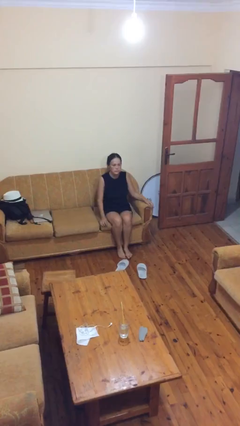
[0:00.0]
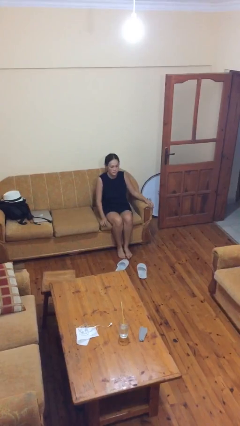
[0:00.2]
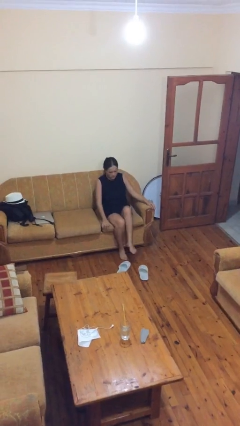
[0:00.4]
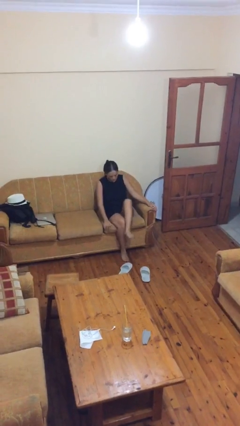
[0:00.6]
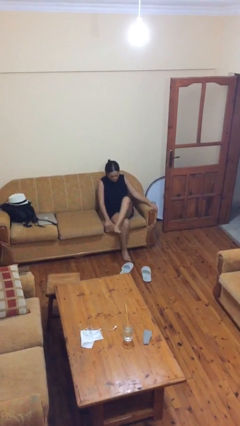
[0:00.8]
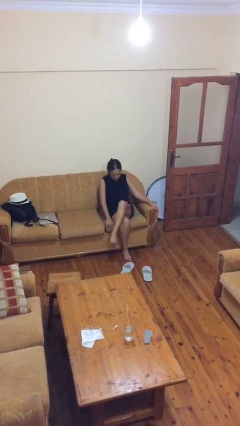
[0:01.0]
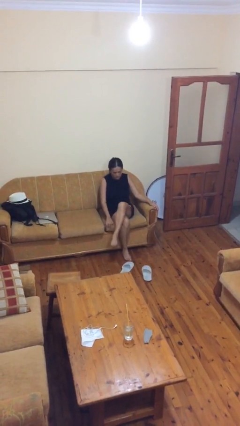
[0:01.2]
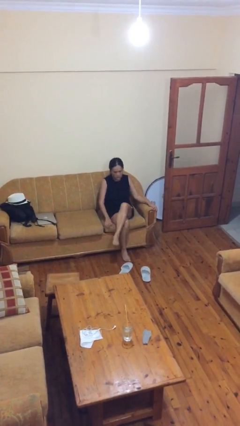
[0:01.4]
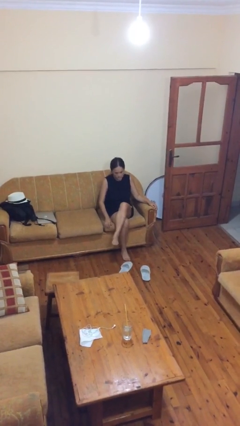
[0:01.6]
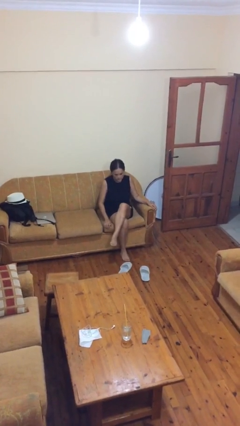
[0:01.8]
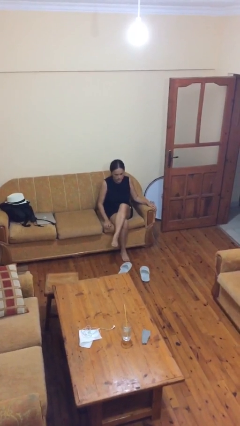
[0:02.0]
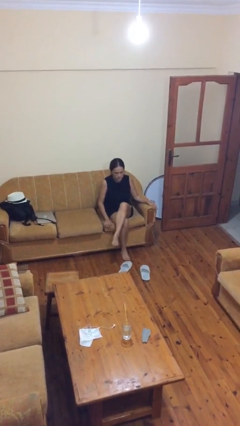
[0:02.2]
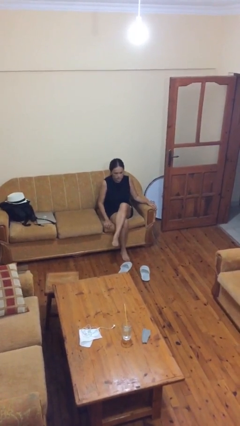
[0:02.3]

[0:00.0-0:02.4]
person crosses legs

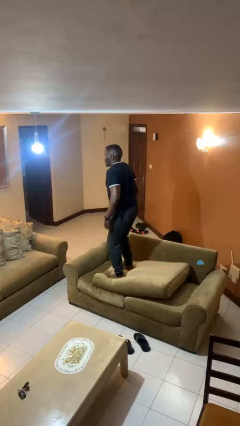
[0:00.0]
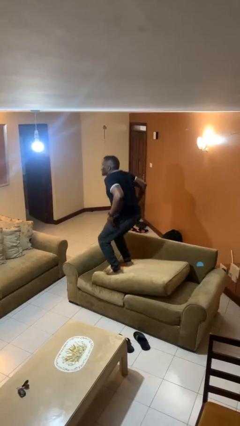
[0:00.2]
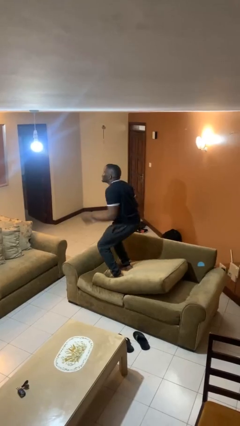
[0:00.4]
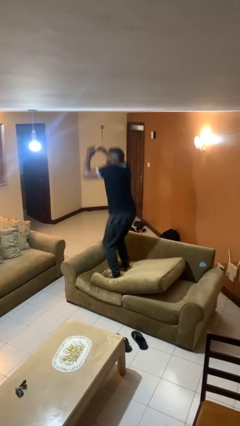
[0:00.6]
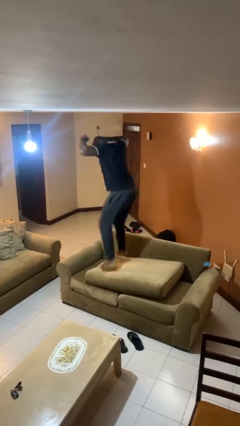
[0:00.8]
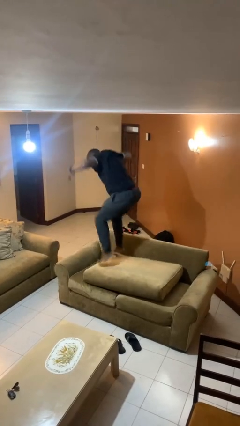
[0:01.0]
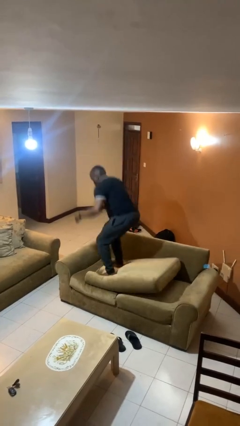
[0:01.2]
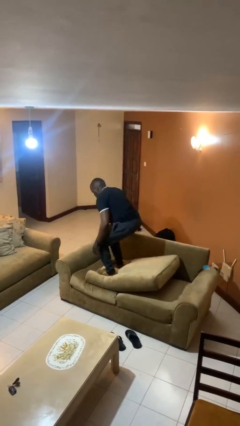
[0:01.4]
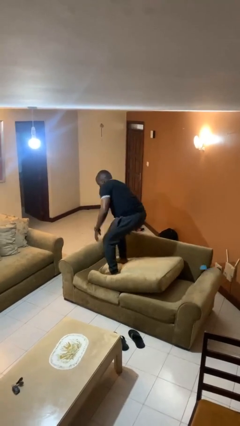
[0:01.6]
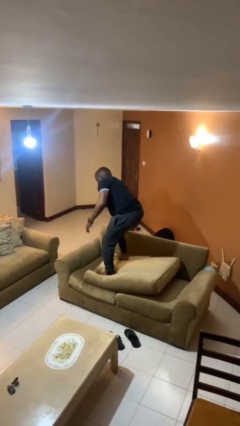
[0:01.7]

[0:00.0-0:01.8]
person jumps on couch

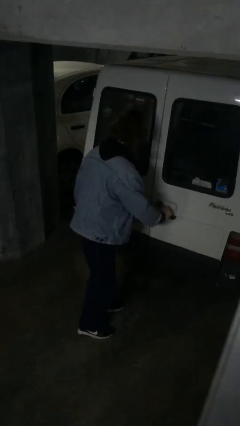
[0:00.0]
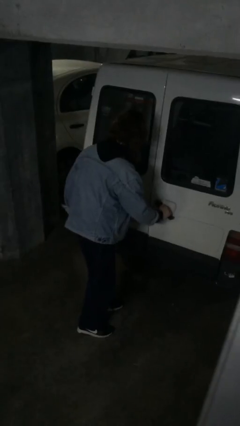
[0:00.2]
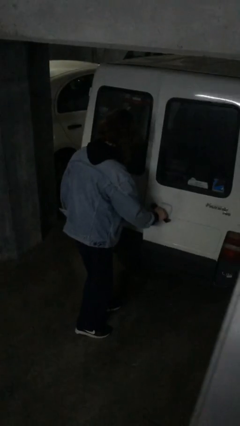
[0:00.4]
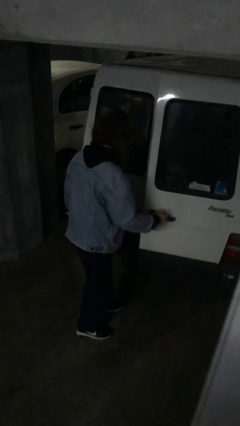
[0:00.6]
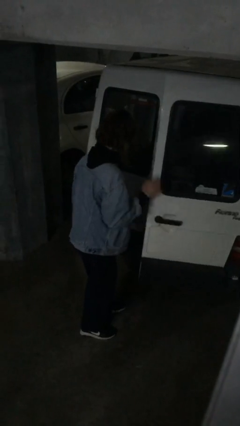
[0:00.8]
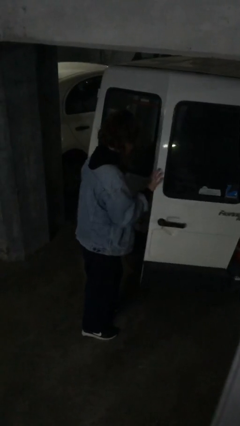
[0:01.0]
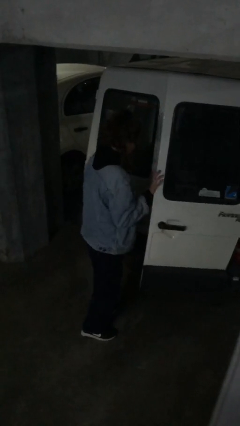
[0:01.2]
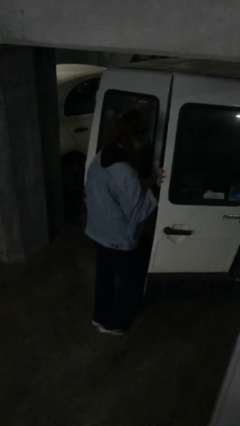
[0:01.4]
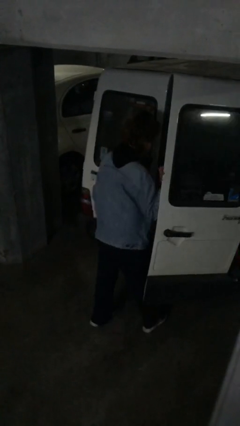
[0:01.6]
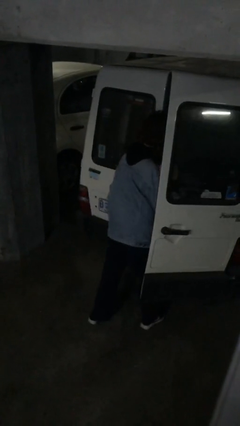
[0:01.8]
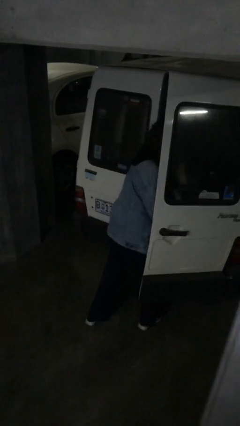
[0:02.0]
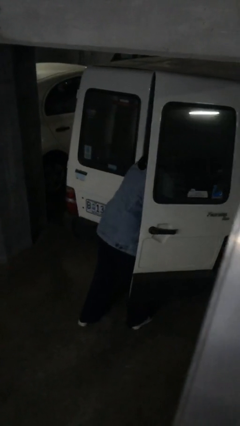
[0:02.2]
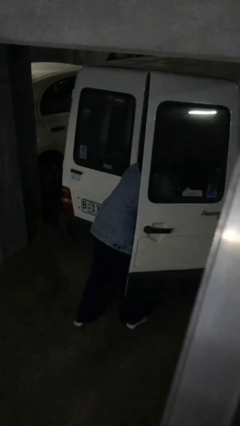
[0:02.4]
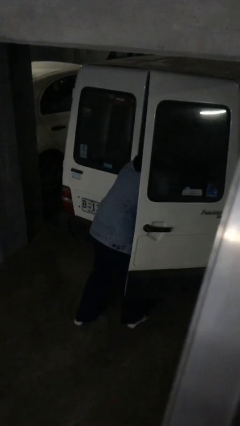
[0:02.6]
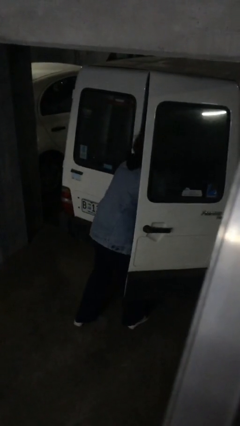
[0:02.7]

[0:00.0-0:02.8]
person opens car door

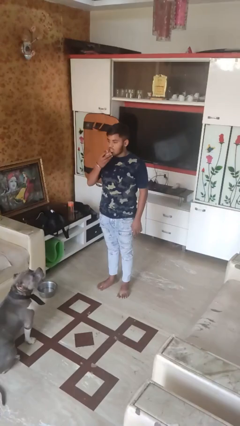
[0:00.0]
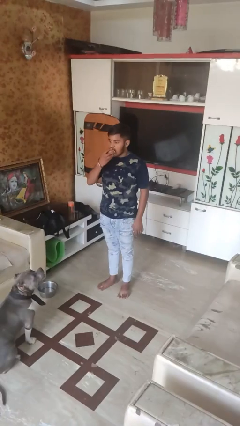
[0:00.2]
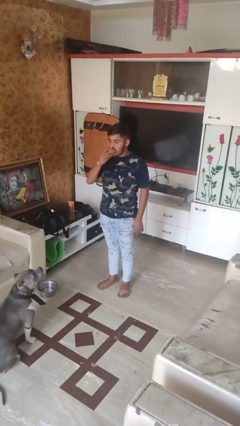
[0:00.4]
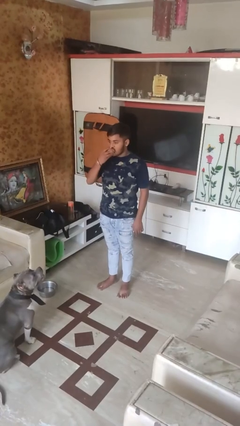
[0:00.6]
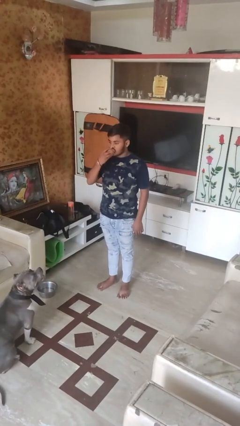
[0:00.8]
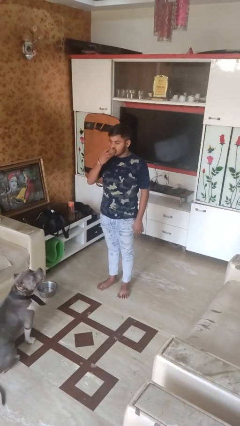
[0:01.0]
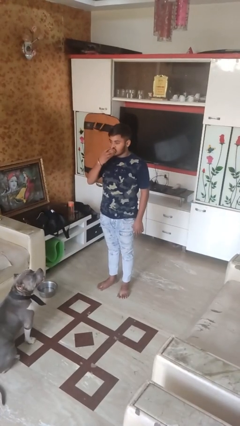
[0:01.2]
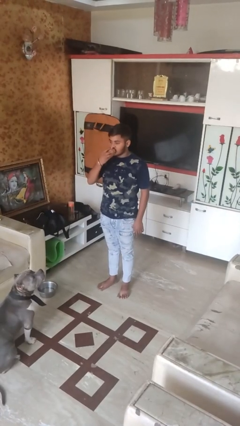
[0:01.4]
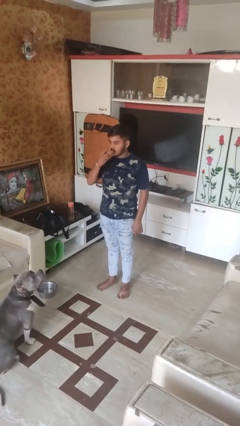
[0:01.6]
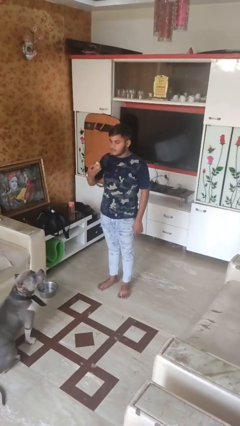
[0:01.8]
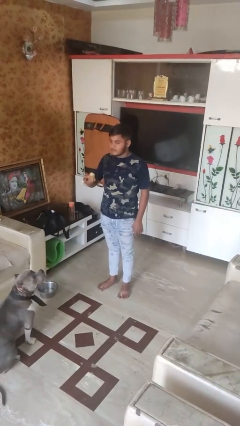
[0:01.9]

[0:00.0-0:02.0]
person eats apple

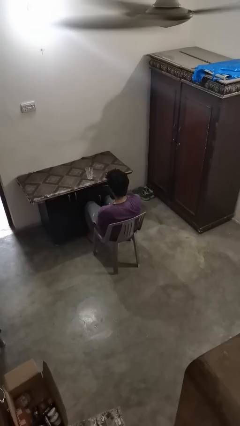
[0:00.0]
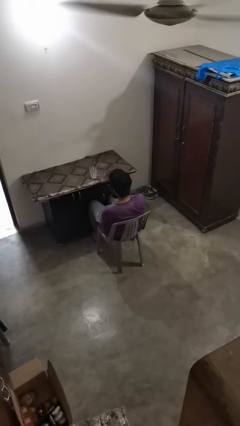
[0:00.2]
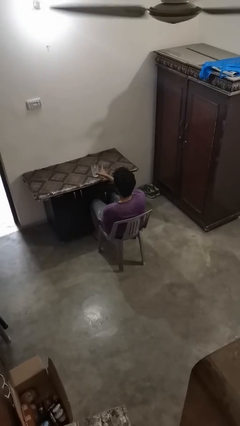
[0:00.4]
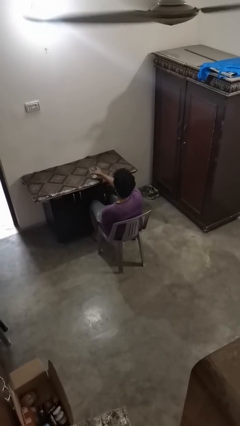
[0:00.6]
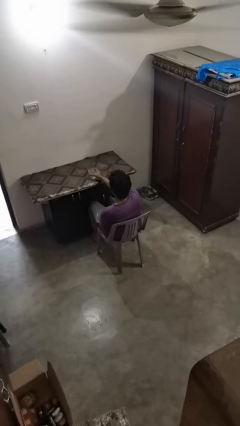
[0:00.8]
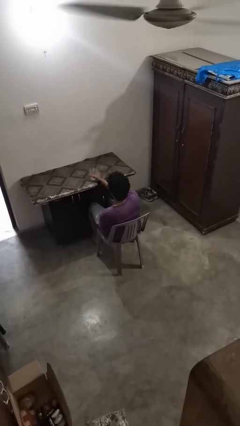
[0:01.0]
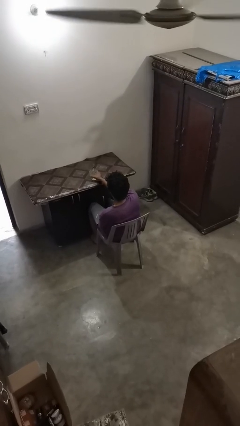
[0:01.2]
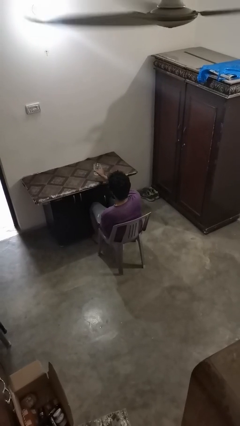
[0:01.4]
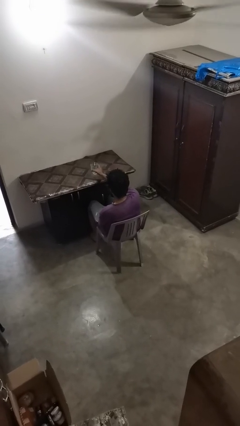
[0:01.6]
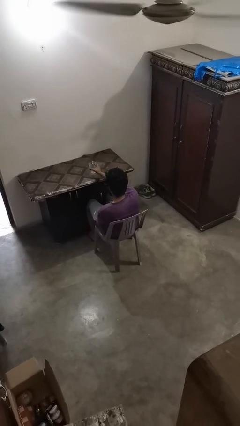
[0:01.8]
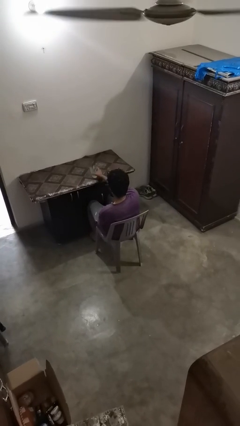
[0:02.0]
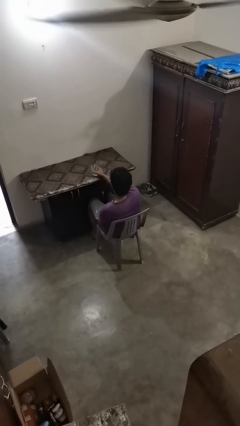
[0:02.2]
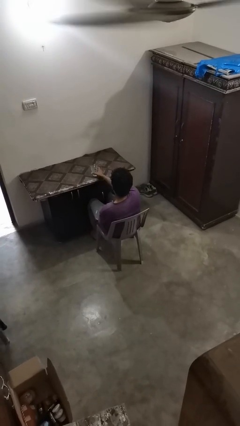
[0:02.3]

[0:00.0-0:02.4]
person knocks over glass

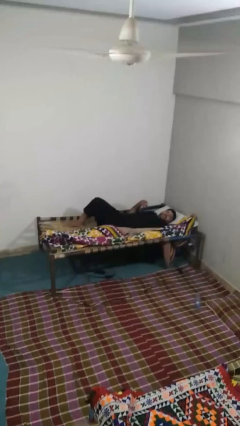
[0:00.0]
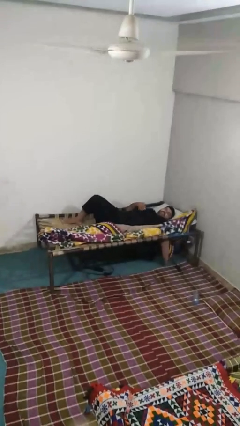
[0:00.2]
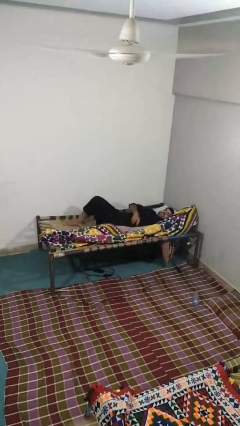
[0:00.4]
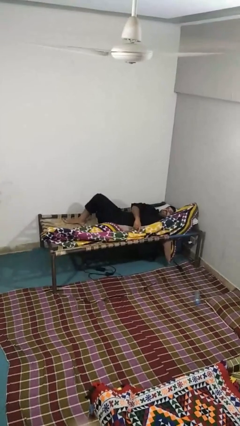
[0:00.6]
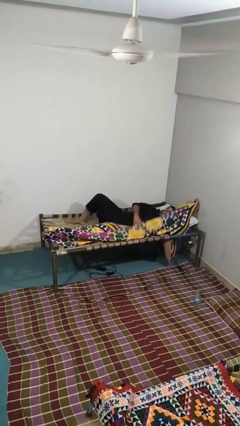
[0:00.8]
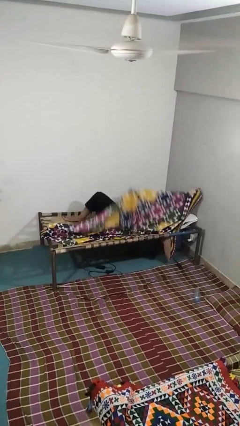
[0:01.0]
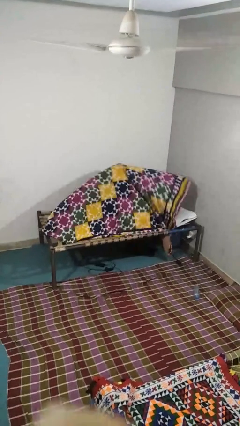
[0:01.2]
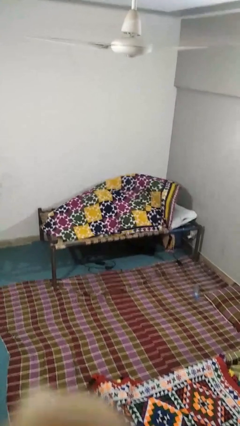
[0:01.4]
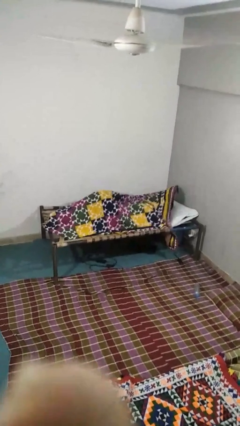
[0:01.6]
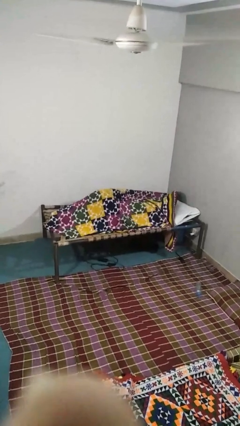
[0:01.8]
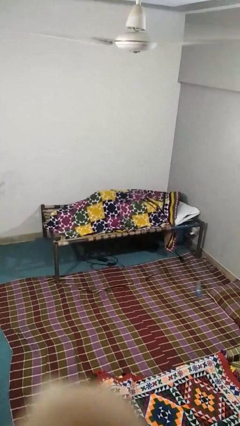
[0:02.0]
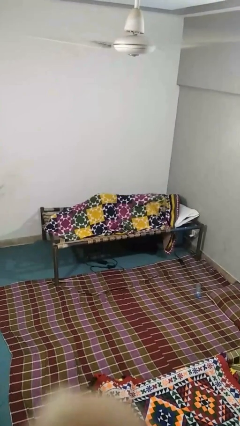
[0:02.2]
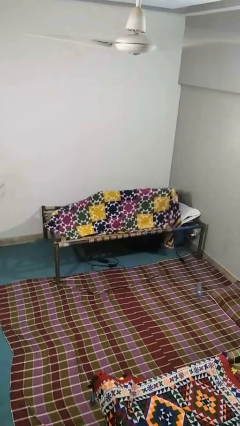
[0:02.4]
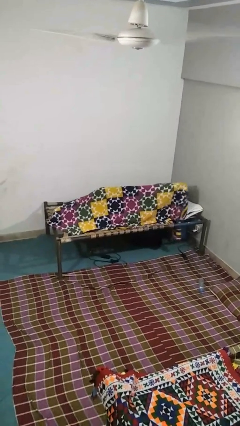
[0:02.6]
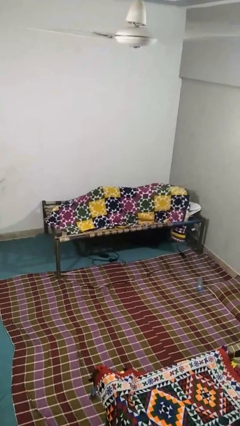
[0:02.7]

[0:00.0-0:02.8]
person covers with blanket

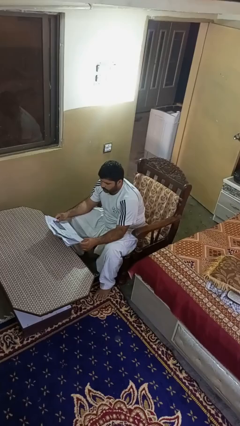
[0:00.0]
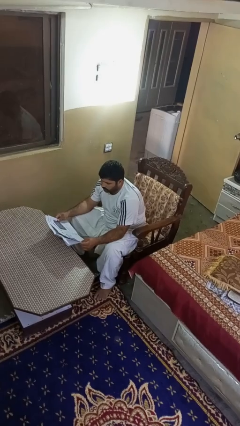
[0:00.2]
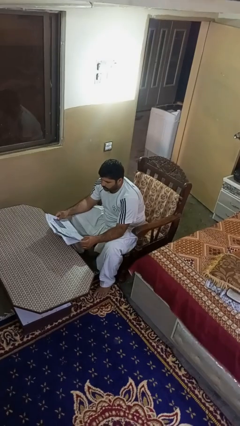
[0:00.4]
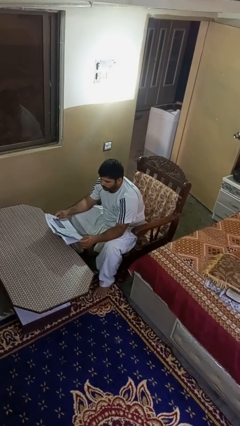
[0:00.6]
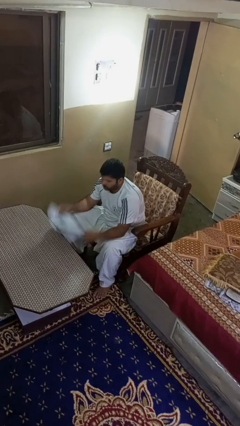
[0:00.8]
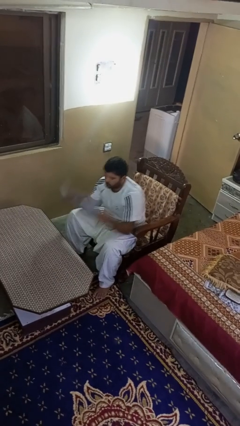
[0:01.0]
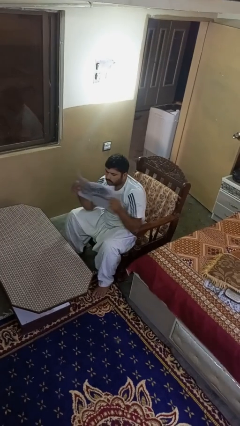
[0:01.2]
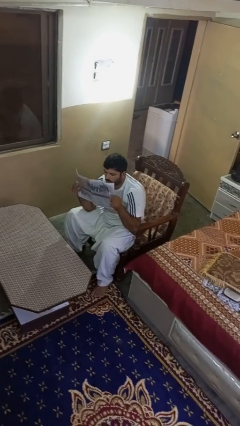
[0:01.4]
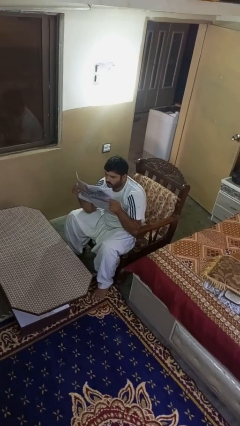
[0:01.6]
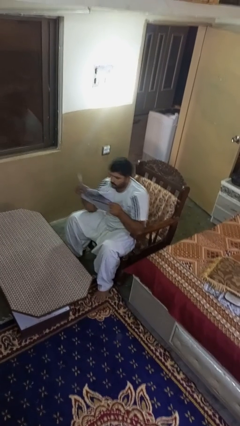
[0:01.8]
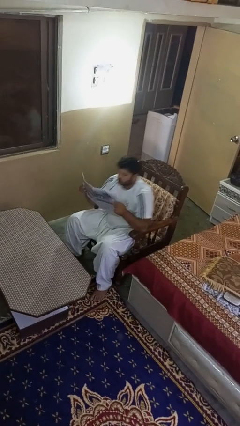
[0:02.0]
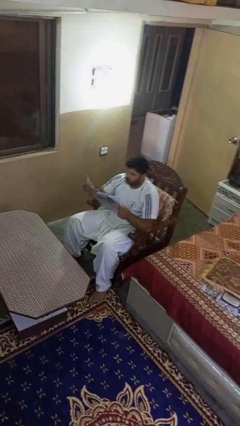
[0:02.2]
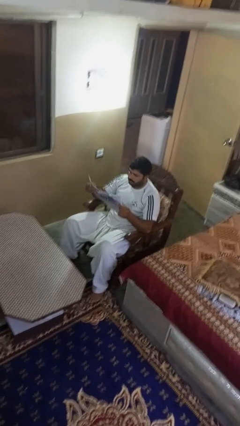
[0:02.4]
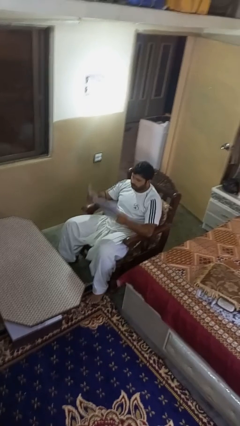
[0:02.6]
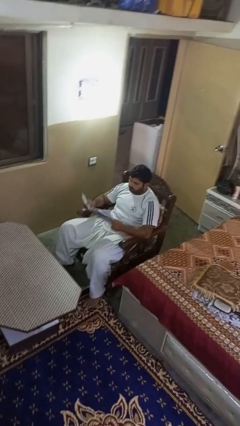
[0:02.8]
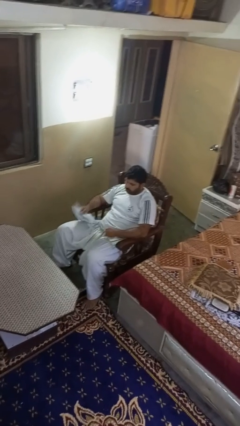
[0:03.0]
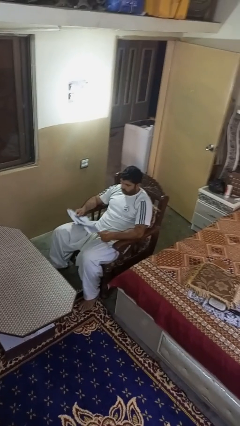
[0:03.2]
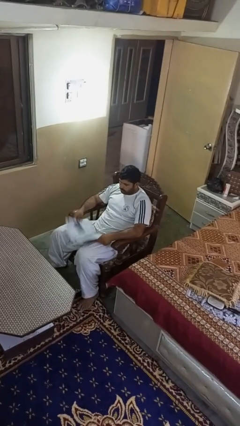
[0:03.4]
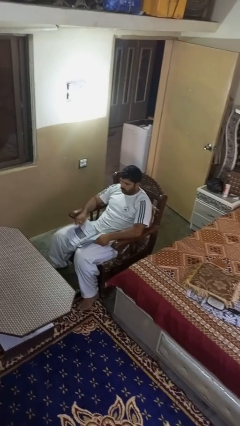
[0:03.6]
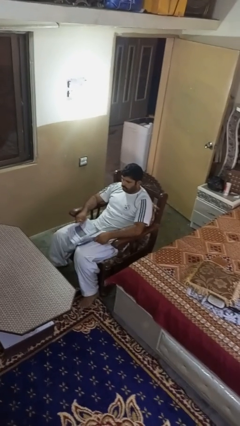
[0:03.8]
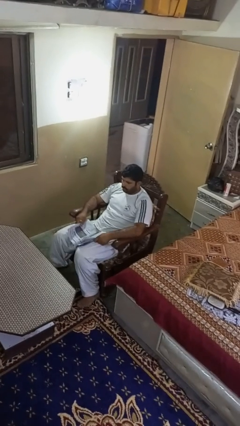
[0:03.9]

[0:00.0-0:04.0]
person reads newspaper
